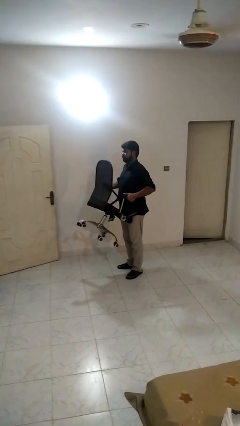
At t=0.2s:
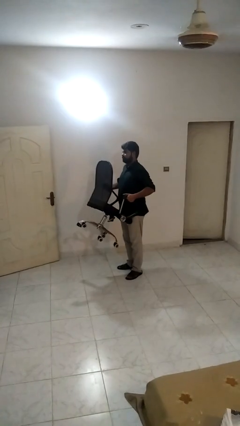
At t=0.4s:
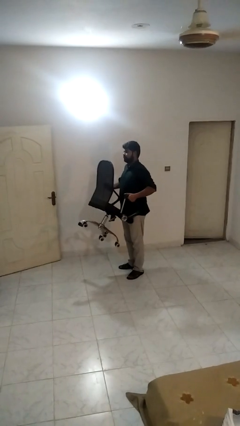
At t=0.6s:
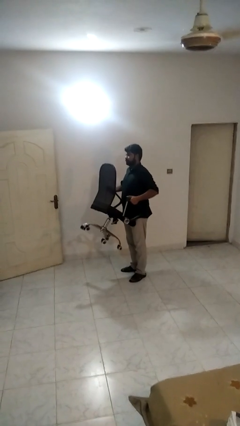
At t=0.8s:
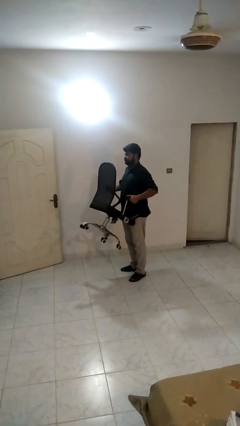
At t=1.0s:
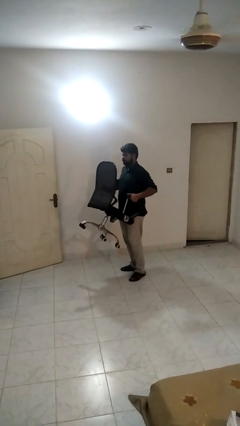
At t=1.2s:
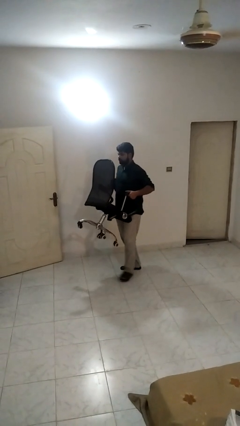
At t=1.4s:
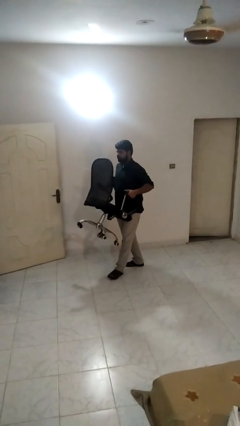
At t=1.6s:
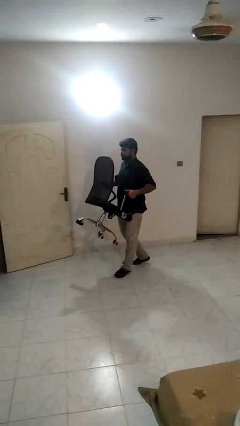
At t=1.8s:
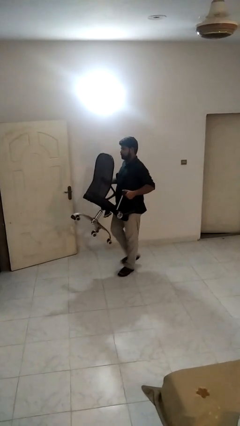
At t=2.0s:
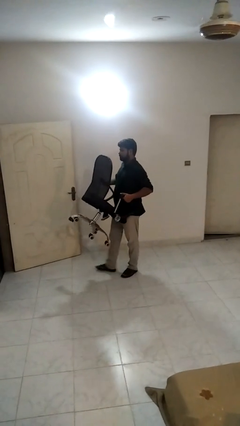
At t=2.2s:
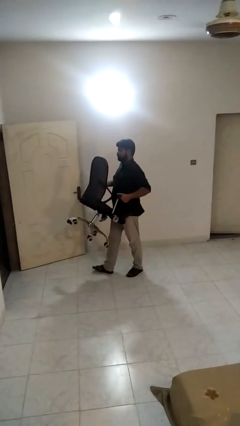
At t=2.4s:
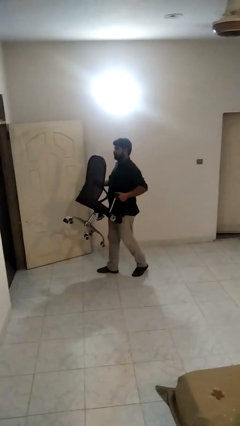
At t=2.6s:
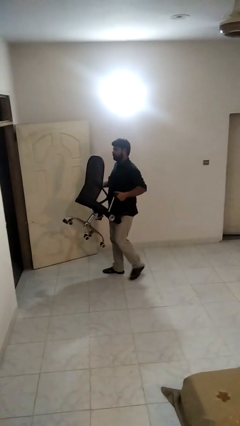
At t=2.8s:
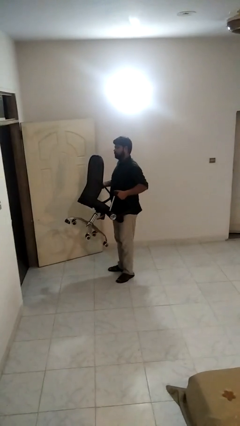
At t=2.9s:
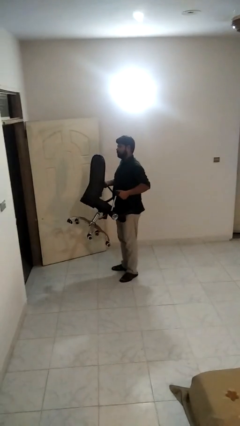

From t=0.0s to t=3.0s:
person carries furniture

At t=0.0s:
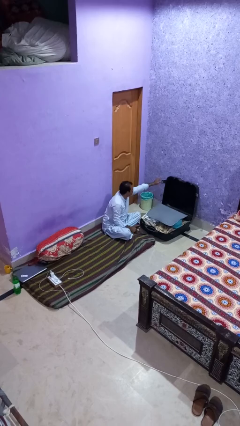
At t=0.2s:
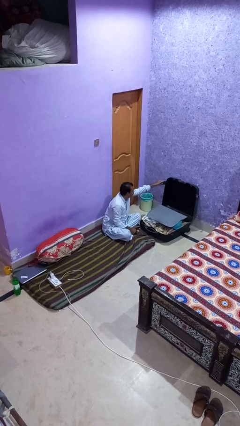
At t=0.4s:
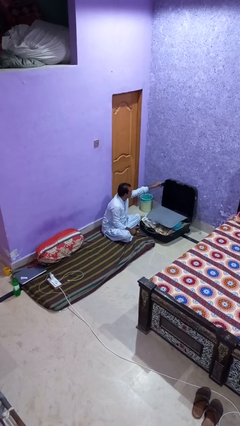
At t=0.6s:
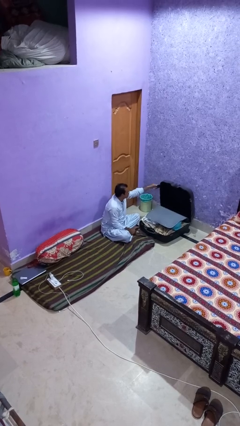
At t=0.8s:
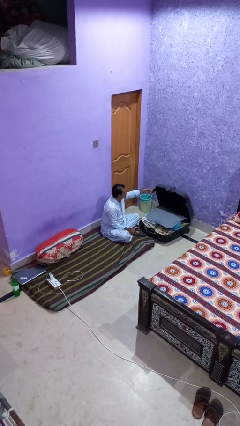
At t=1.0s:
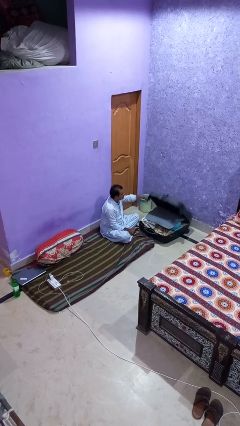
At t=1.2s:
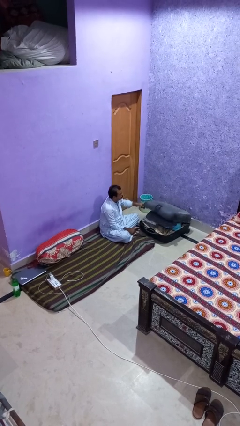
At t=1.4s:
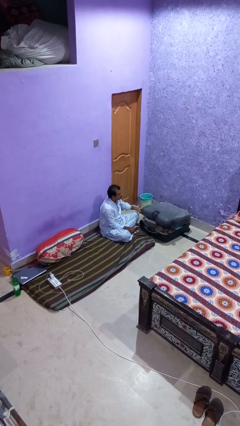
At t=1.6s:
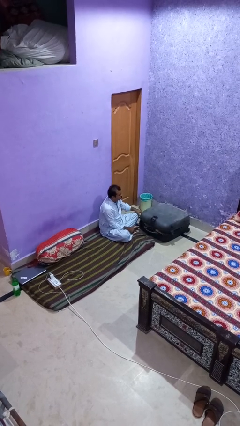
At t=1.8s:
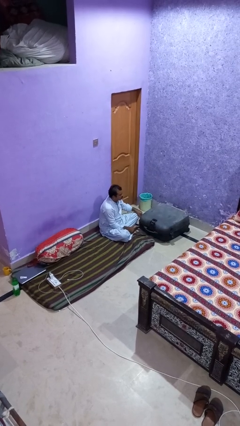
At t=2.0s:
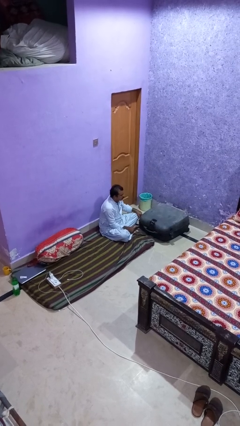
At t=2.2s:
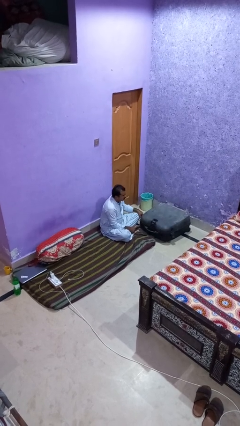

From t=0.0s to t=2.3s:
person closes suitcase

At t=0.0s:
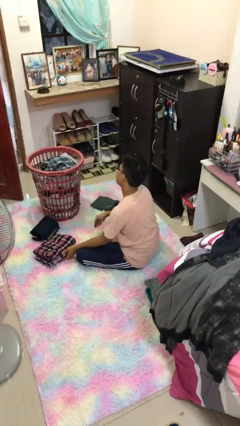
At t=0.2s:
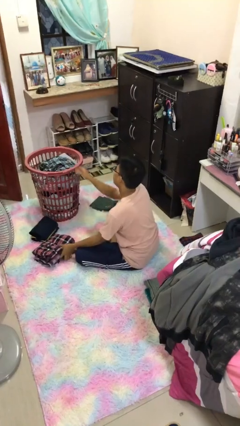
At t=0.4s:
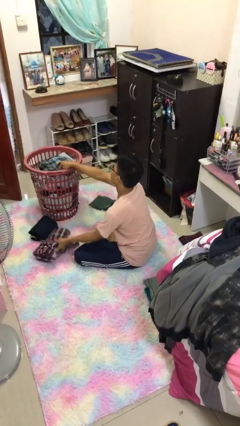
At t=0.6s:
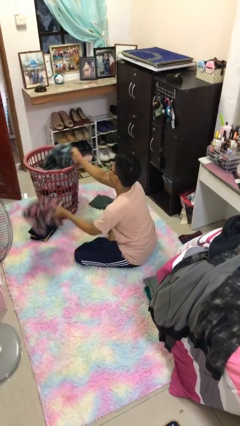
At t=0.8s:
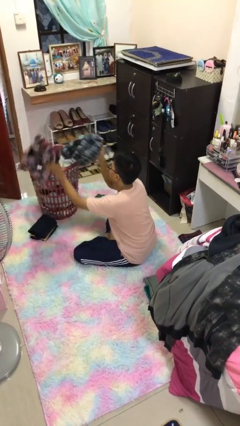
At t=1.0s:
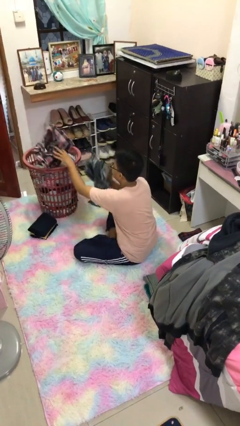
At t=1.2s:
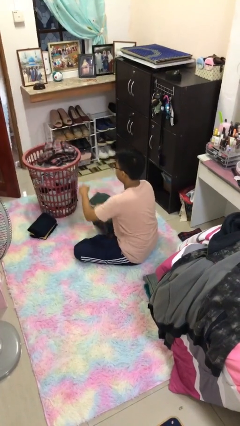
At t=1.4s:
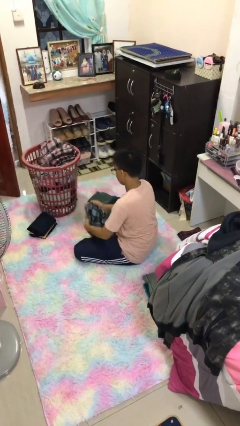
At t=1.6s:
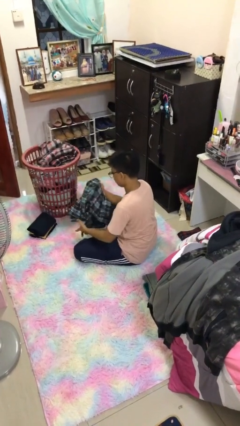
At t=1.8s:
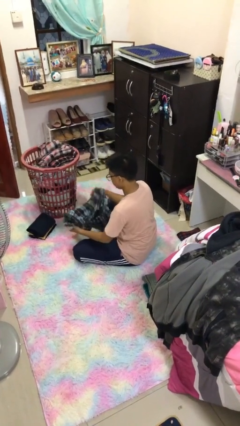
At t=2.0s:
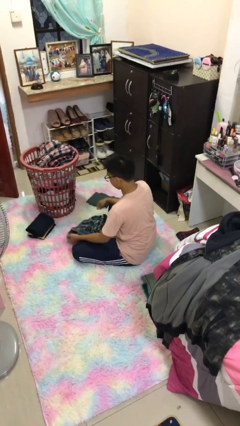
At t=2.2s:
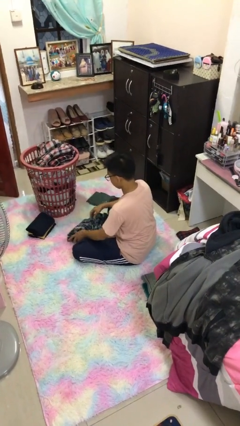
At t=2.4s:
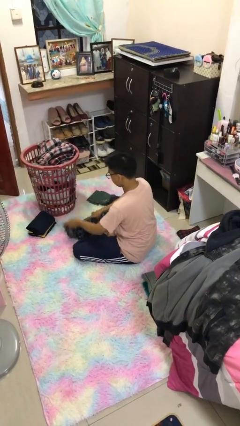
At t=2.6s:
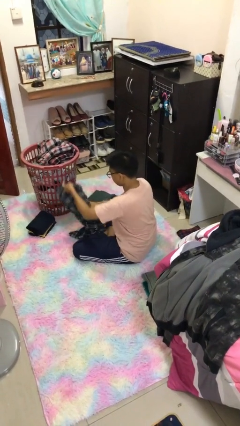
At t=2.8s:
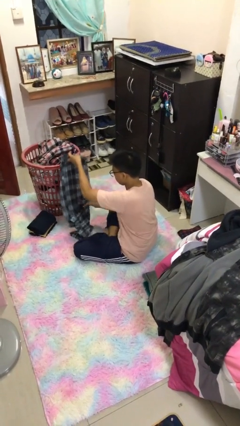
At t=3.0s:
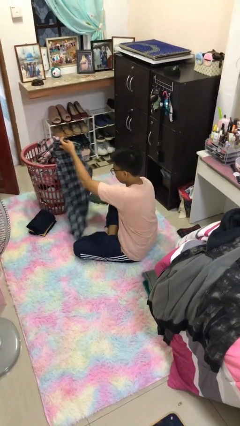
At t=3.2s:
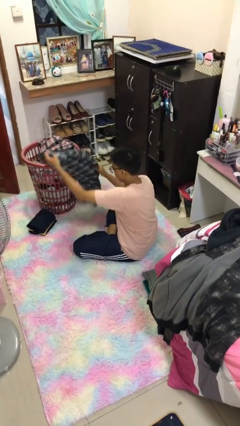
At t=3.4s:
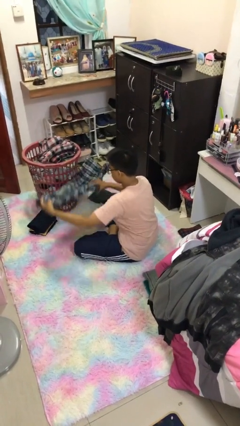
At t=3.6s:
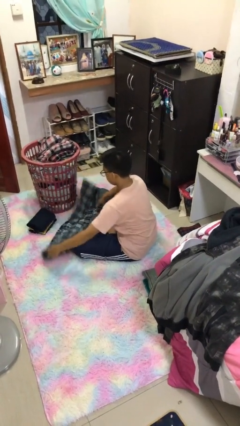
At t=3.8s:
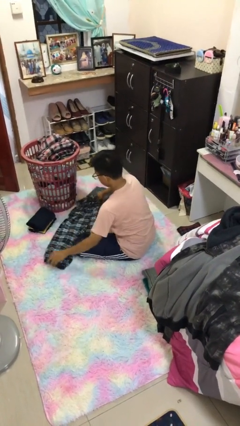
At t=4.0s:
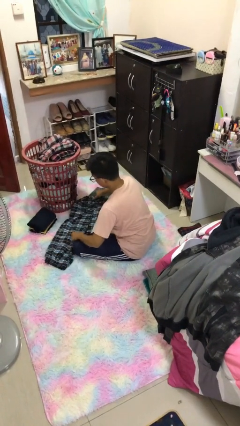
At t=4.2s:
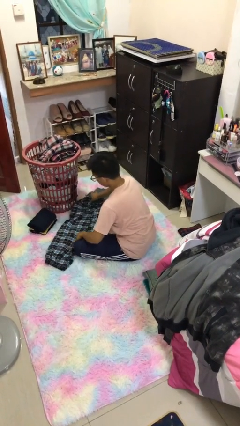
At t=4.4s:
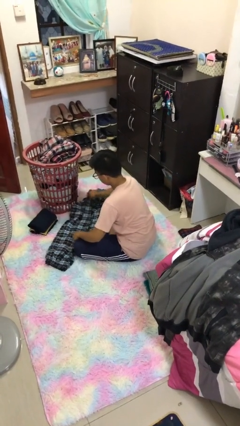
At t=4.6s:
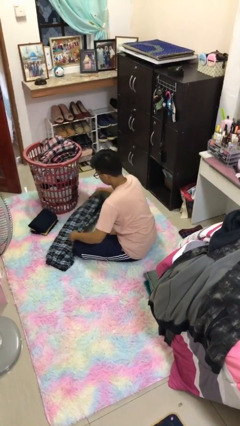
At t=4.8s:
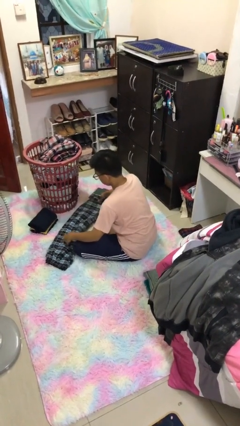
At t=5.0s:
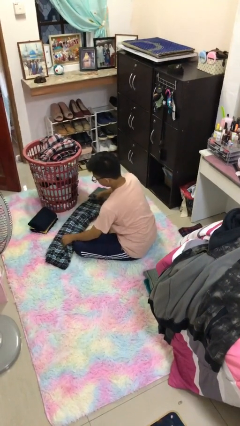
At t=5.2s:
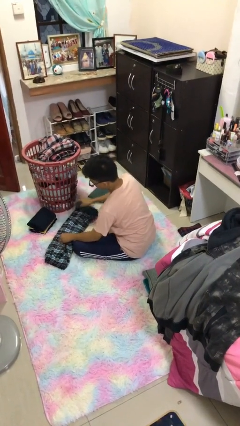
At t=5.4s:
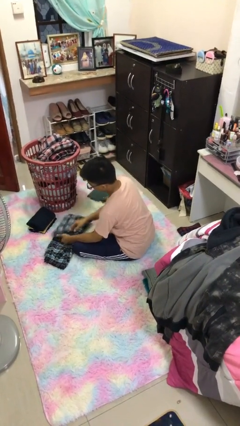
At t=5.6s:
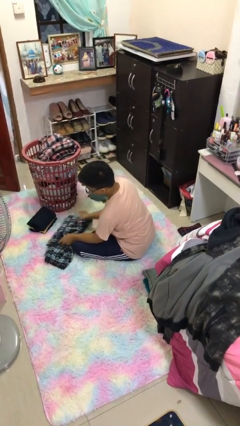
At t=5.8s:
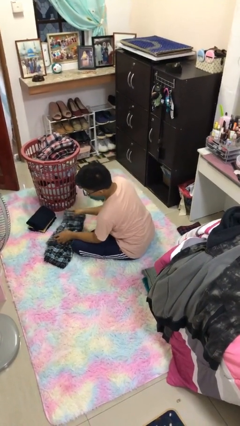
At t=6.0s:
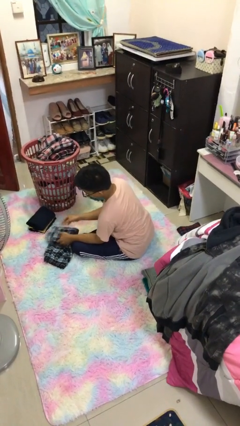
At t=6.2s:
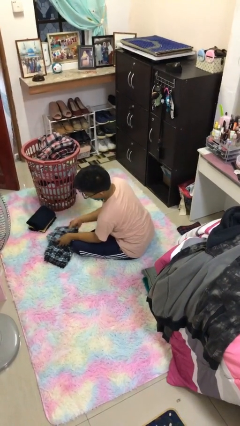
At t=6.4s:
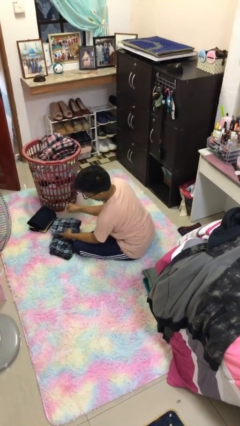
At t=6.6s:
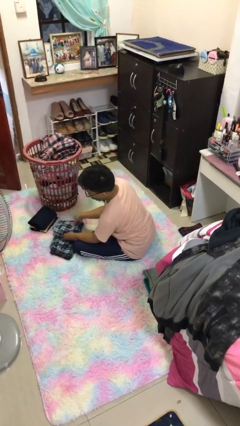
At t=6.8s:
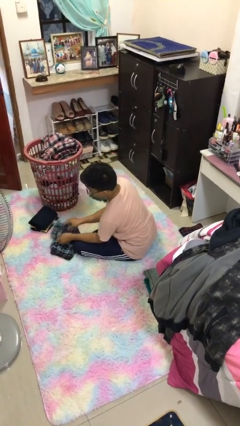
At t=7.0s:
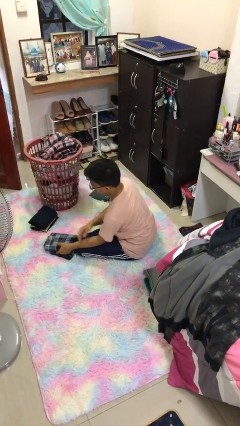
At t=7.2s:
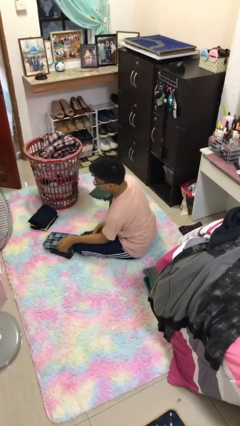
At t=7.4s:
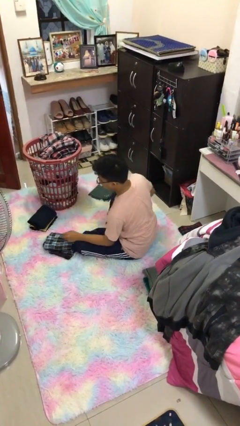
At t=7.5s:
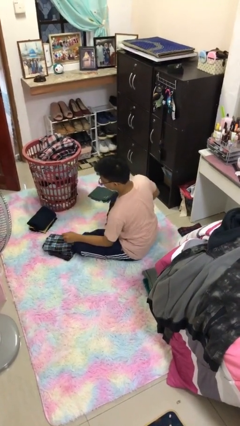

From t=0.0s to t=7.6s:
person folds pants

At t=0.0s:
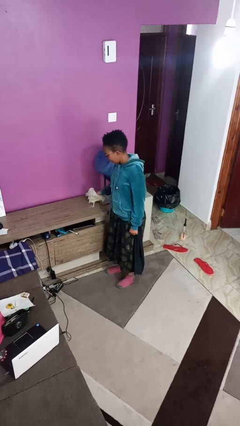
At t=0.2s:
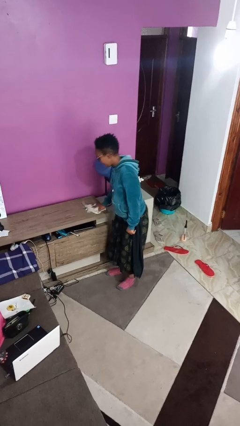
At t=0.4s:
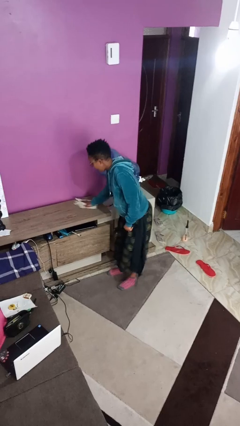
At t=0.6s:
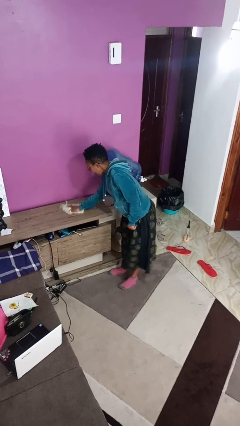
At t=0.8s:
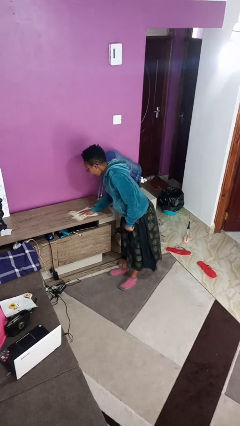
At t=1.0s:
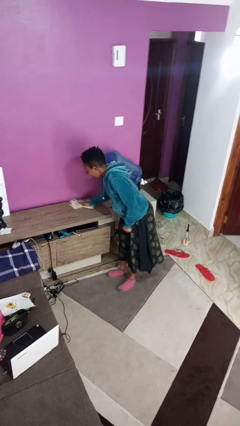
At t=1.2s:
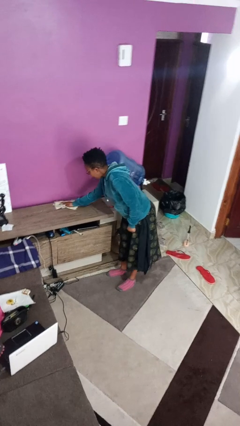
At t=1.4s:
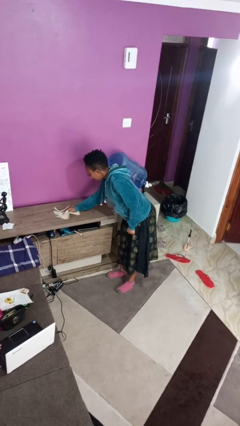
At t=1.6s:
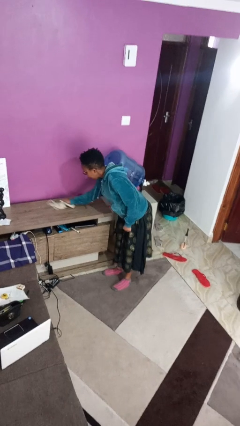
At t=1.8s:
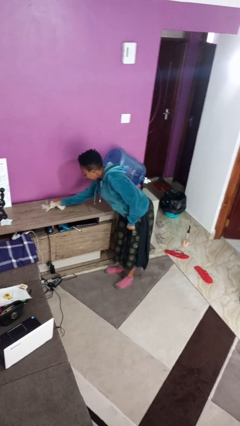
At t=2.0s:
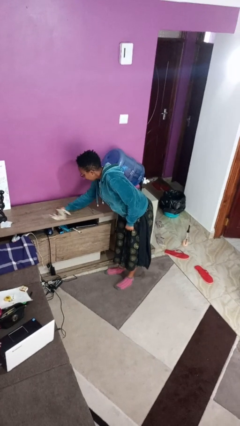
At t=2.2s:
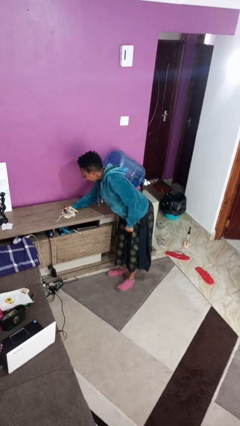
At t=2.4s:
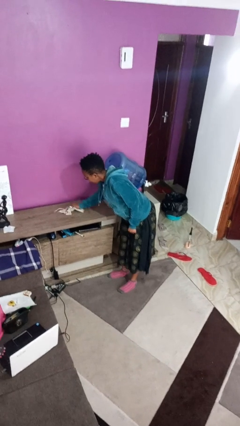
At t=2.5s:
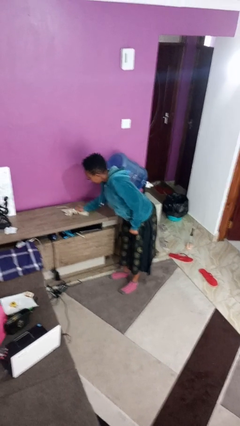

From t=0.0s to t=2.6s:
person cleans table with rag

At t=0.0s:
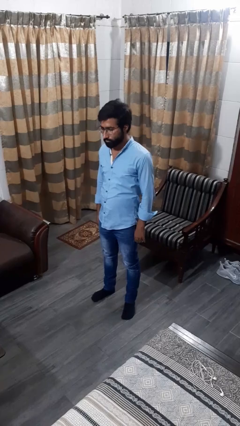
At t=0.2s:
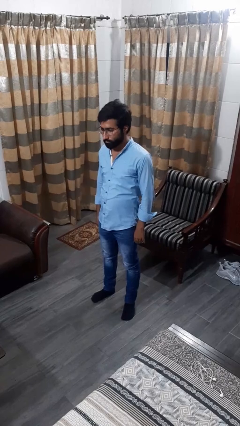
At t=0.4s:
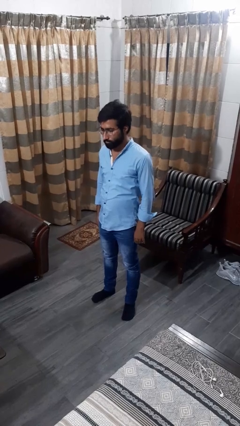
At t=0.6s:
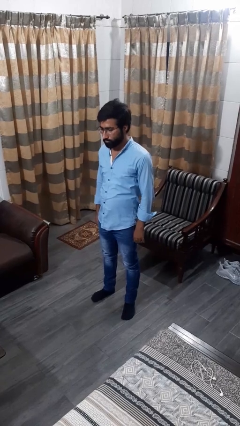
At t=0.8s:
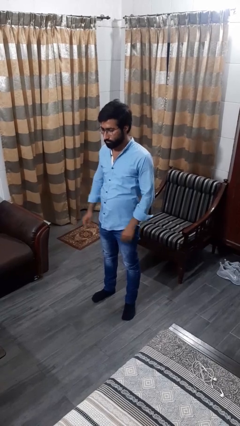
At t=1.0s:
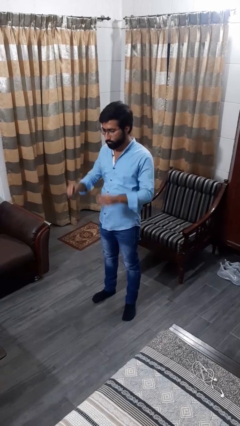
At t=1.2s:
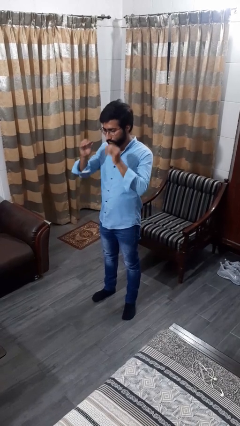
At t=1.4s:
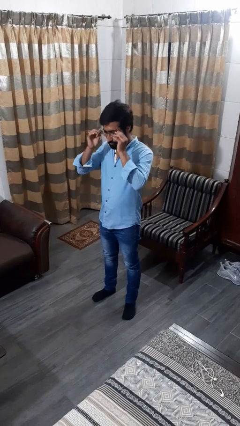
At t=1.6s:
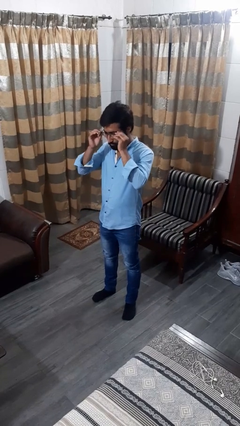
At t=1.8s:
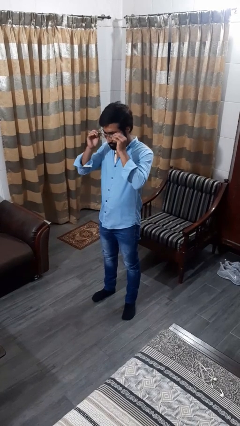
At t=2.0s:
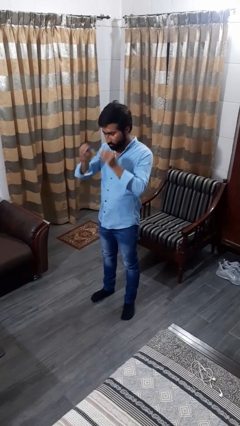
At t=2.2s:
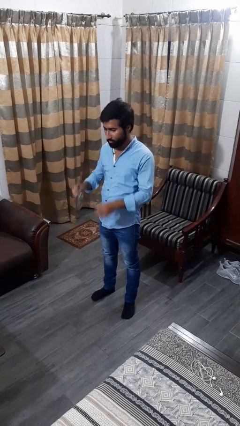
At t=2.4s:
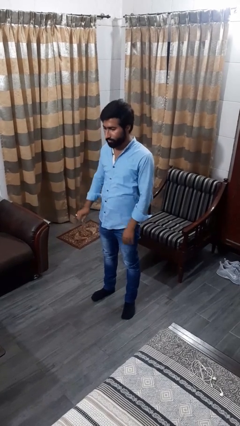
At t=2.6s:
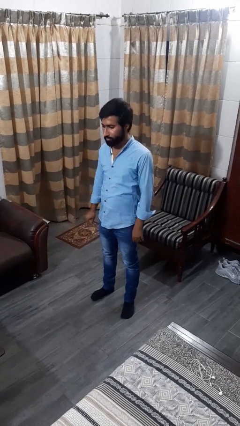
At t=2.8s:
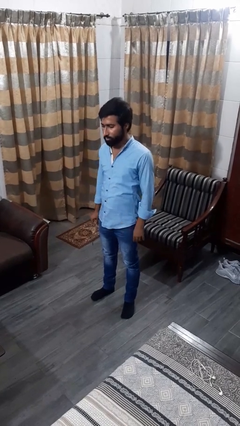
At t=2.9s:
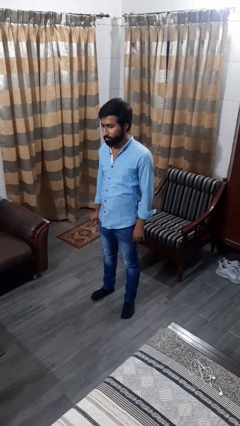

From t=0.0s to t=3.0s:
person takes off glasses
